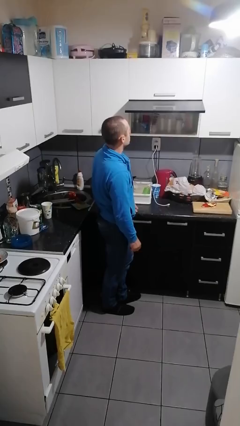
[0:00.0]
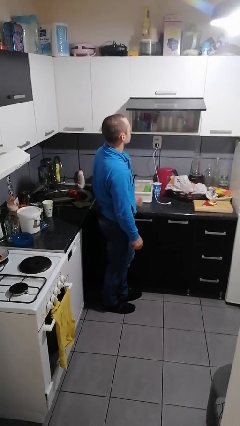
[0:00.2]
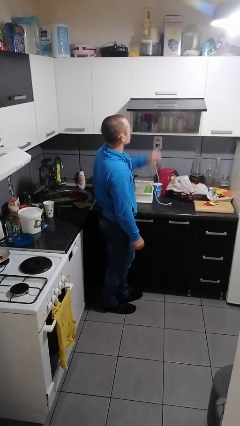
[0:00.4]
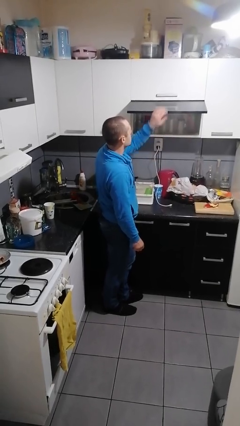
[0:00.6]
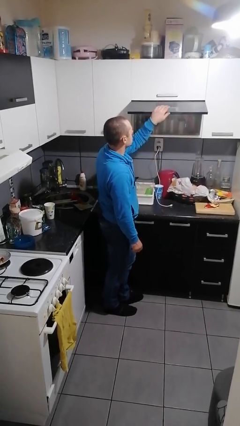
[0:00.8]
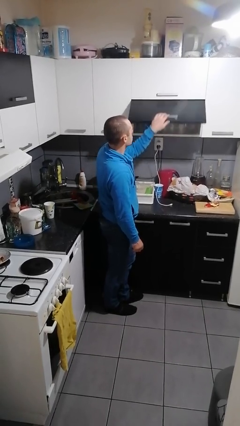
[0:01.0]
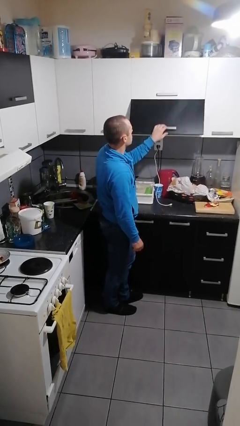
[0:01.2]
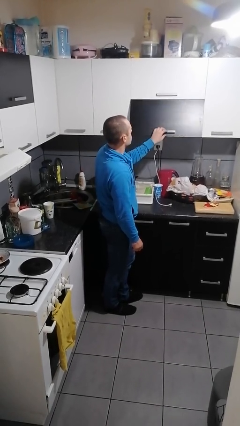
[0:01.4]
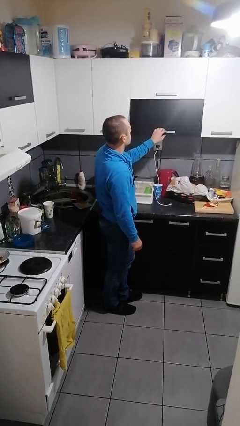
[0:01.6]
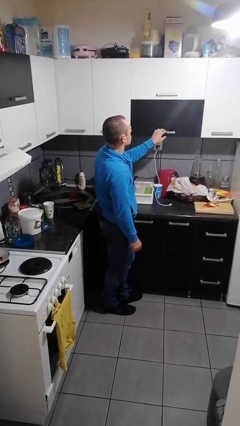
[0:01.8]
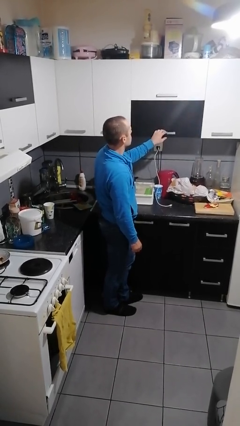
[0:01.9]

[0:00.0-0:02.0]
person closes cabinet

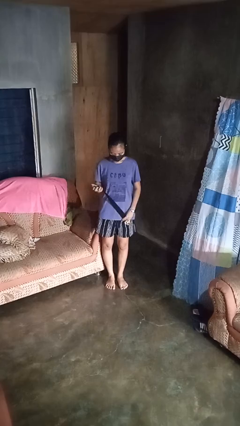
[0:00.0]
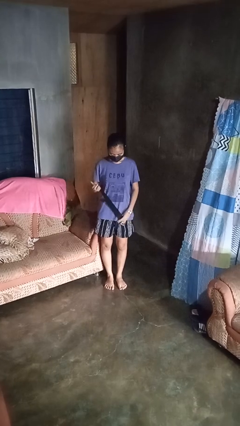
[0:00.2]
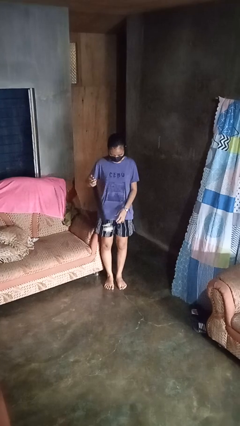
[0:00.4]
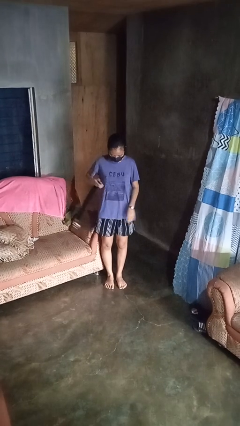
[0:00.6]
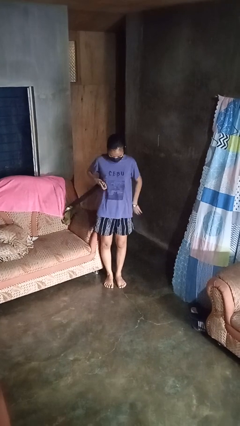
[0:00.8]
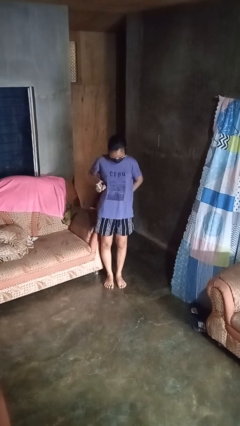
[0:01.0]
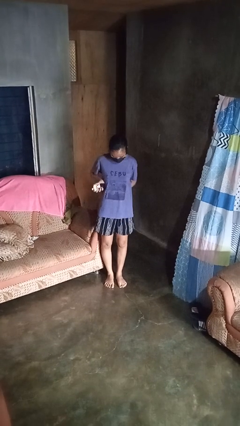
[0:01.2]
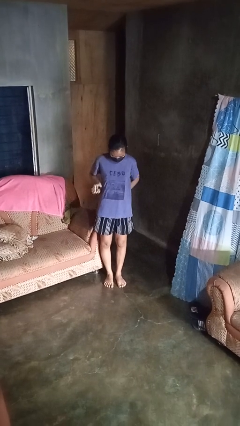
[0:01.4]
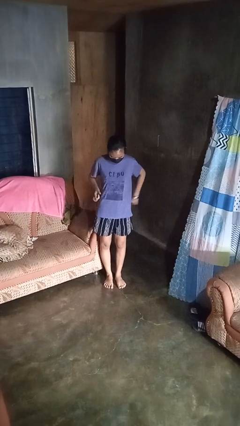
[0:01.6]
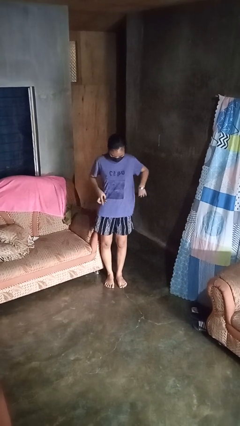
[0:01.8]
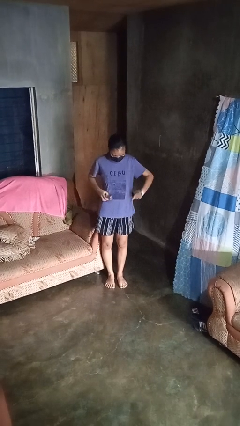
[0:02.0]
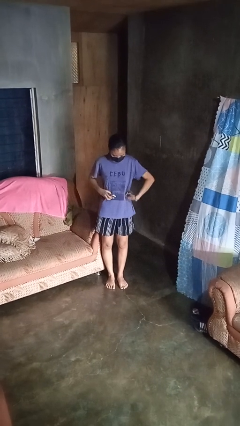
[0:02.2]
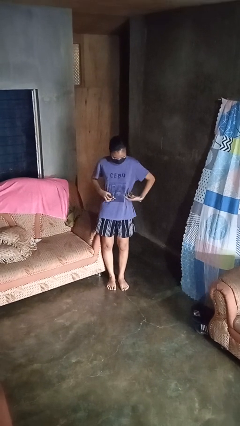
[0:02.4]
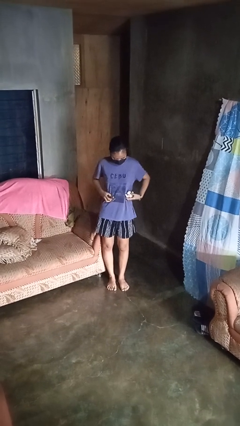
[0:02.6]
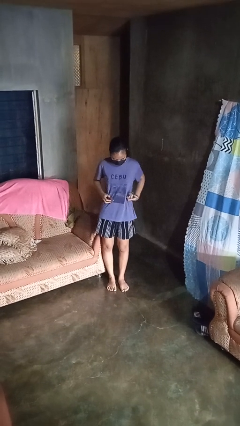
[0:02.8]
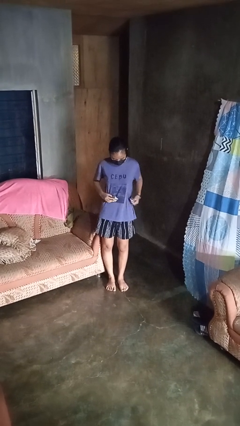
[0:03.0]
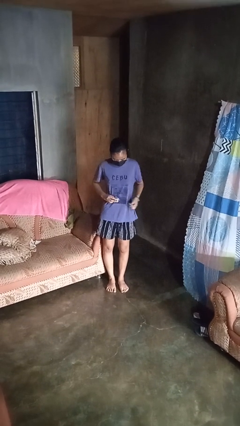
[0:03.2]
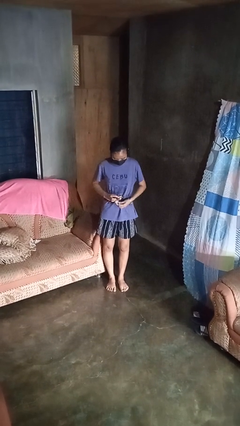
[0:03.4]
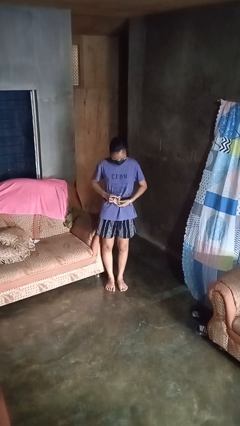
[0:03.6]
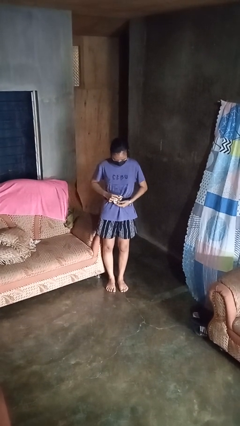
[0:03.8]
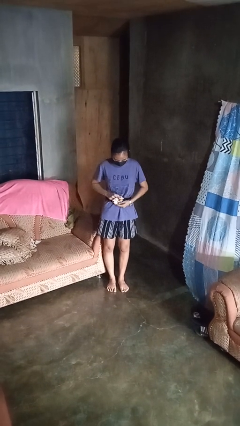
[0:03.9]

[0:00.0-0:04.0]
person puts on belt

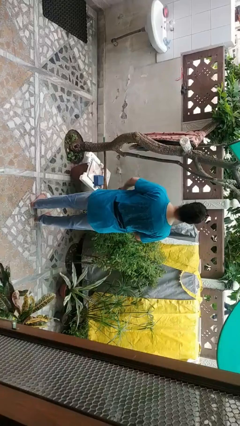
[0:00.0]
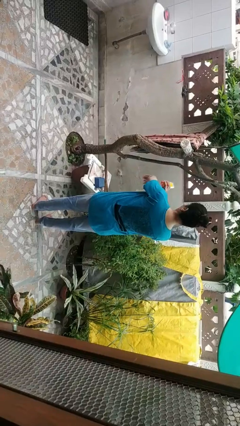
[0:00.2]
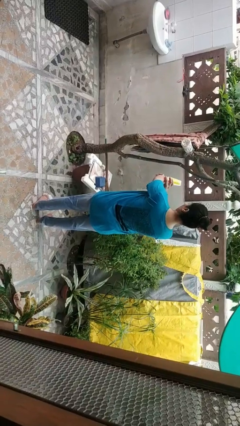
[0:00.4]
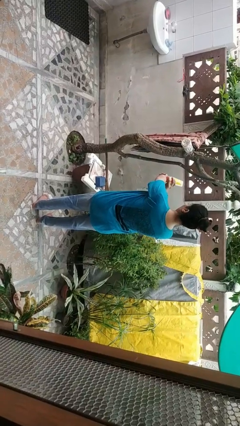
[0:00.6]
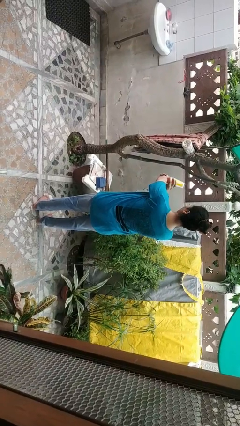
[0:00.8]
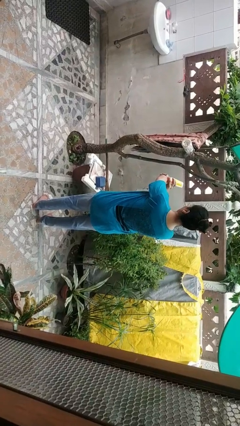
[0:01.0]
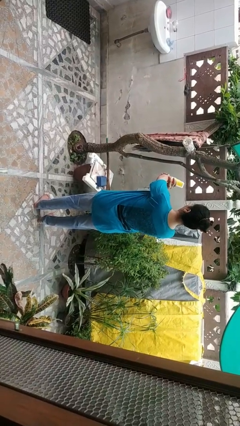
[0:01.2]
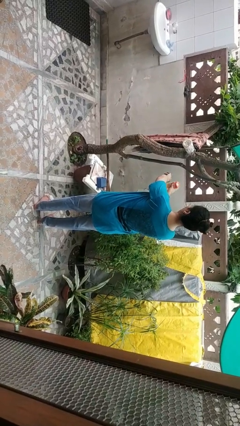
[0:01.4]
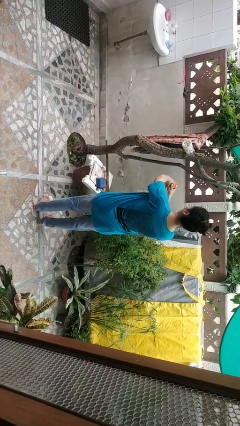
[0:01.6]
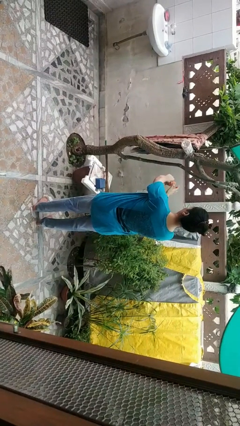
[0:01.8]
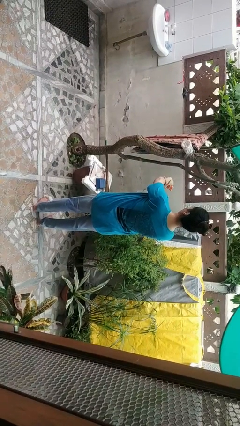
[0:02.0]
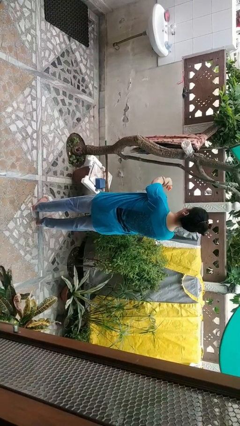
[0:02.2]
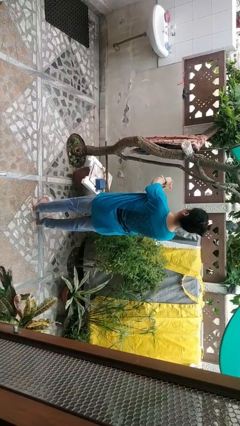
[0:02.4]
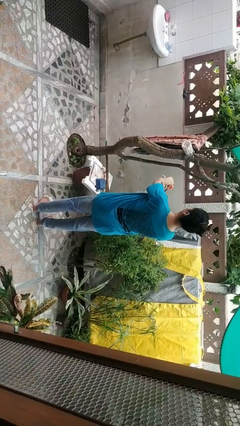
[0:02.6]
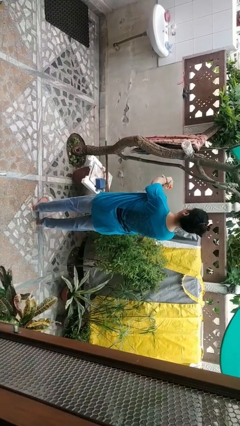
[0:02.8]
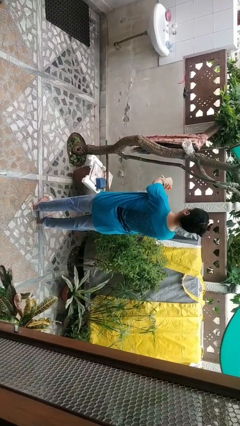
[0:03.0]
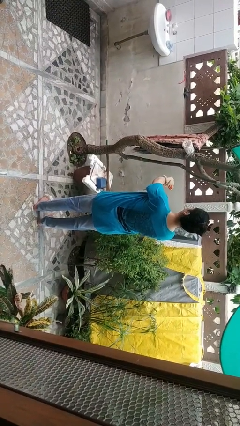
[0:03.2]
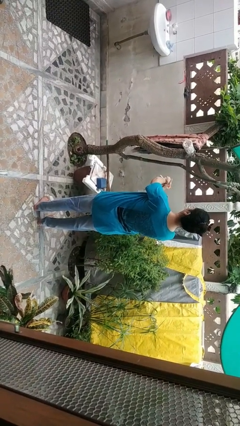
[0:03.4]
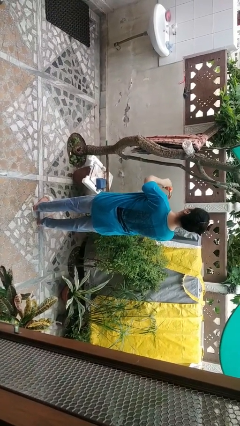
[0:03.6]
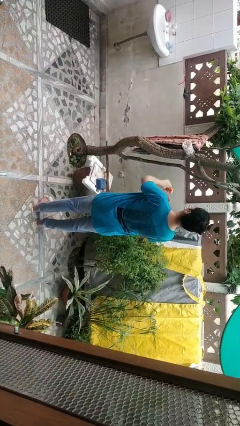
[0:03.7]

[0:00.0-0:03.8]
person applies sunscreen

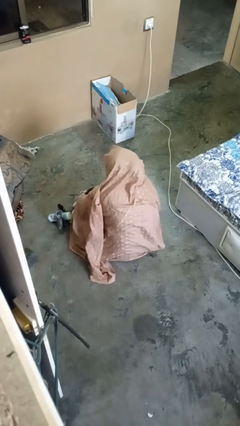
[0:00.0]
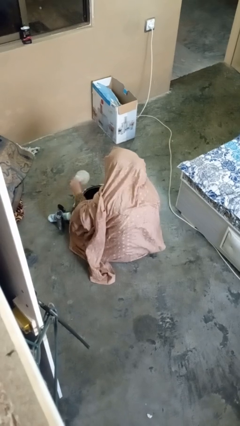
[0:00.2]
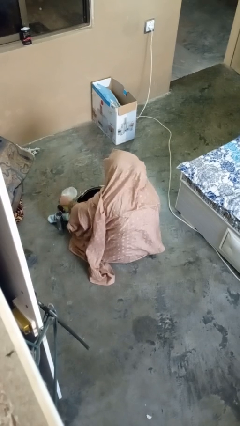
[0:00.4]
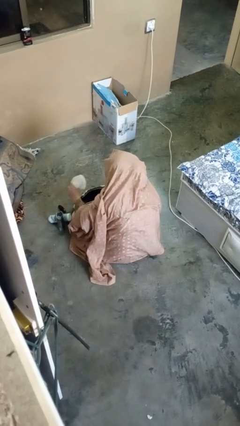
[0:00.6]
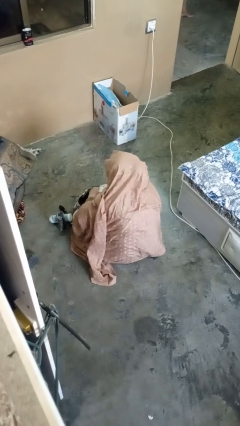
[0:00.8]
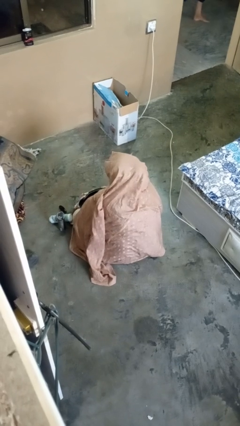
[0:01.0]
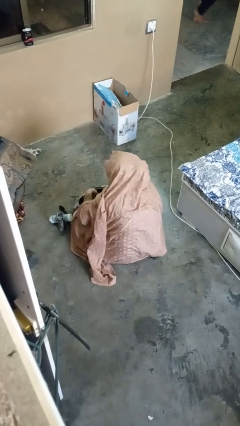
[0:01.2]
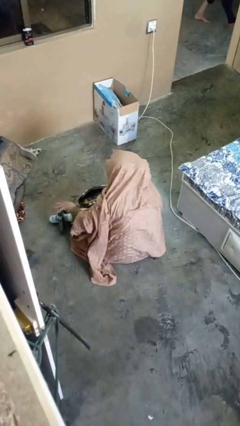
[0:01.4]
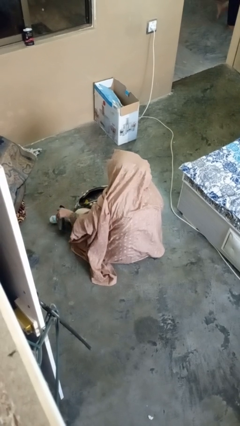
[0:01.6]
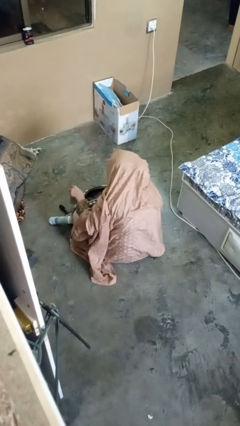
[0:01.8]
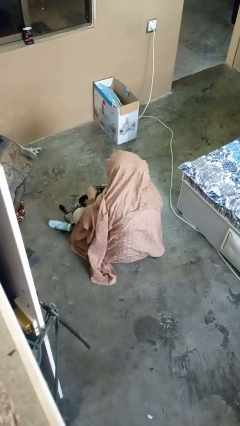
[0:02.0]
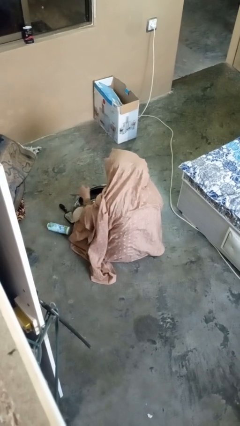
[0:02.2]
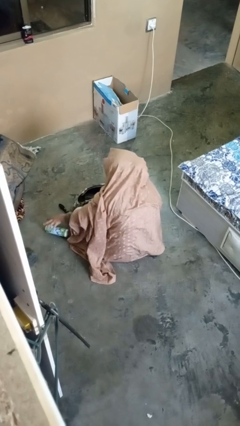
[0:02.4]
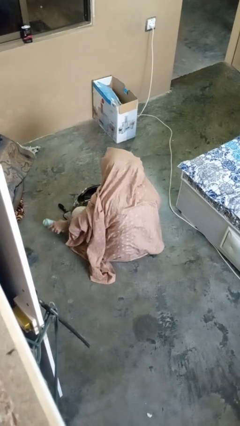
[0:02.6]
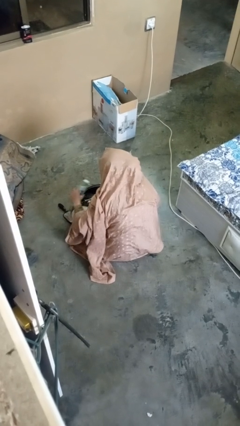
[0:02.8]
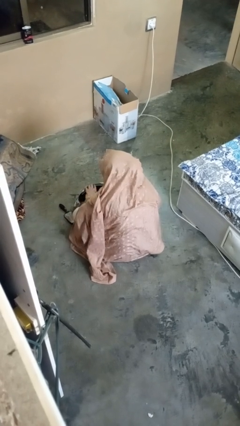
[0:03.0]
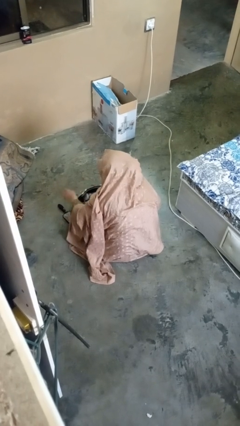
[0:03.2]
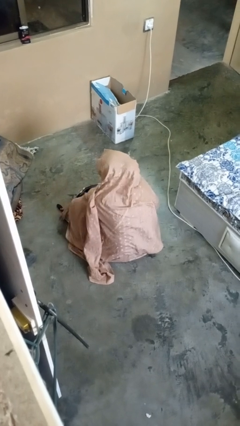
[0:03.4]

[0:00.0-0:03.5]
person puts object into purse

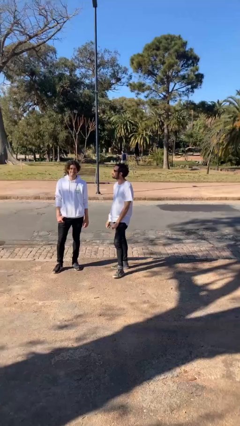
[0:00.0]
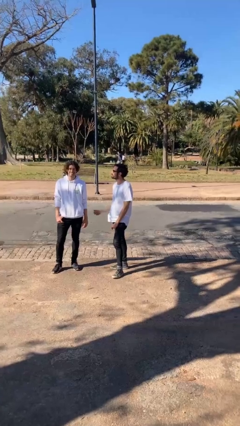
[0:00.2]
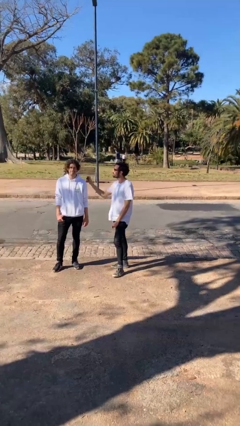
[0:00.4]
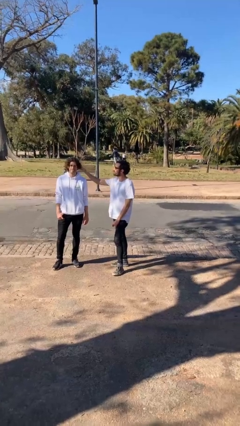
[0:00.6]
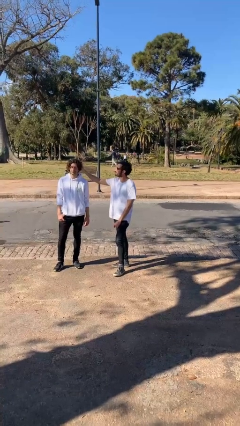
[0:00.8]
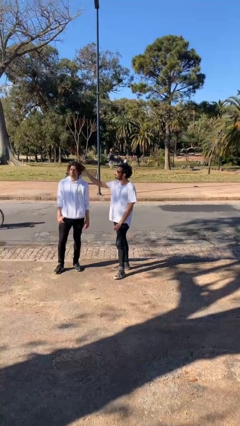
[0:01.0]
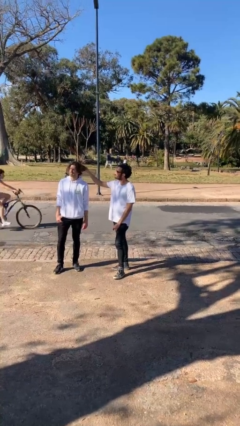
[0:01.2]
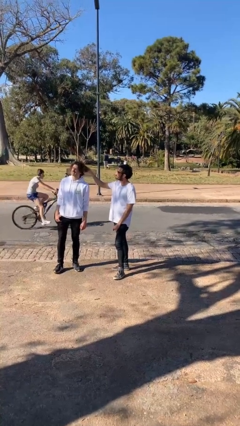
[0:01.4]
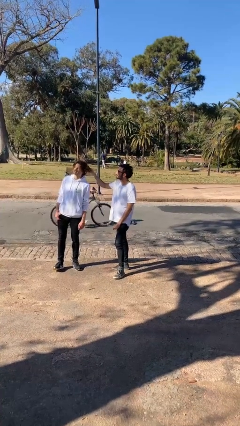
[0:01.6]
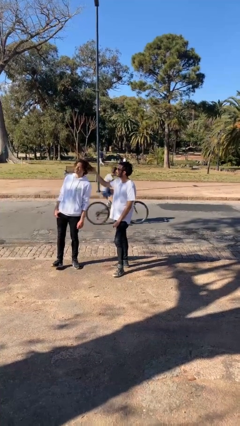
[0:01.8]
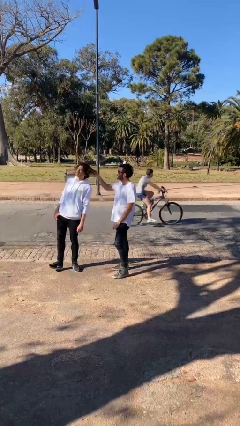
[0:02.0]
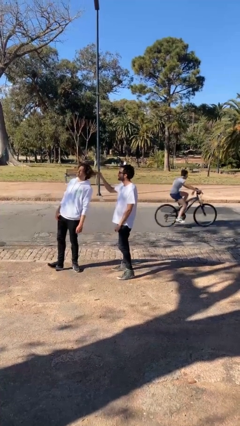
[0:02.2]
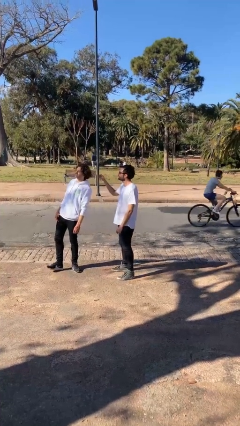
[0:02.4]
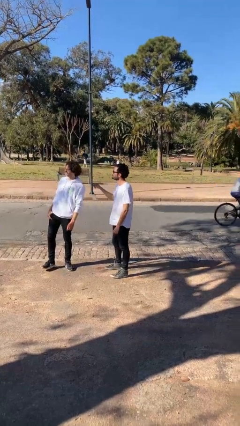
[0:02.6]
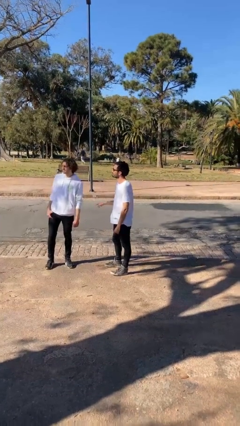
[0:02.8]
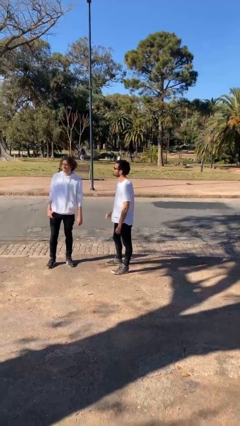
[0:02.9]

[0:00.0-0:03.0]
person grabs person by hair

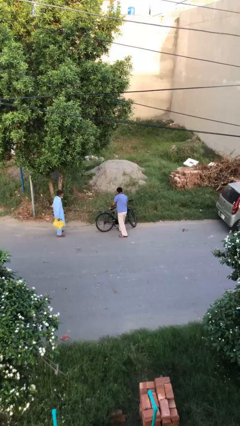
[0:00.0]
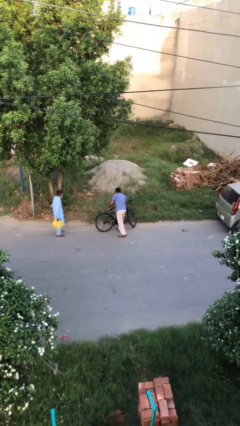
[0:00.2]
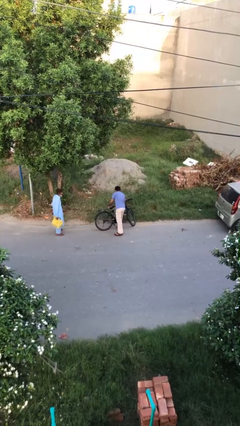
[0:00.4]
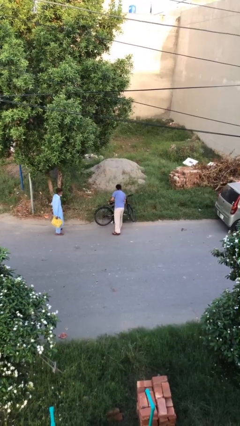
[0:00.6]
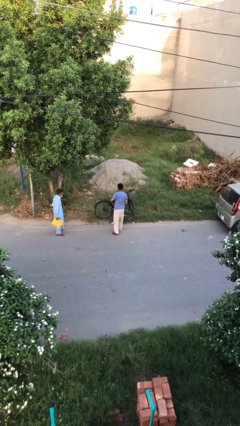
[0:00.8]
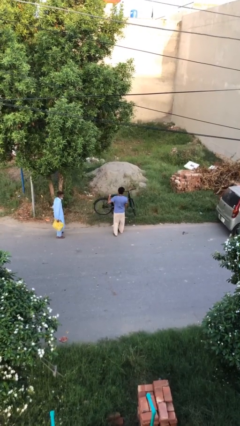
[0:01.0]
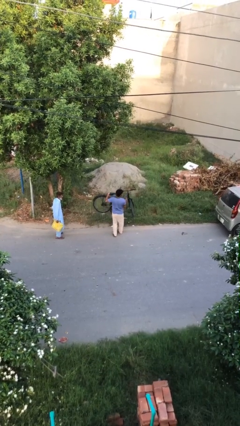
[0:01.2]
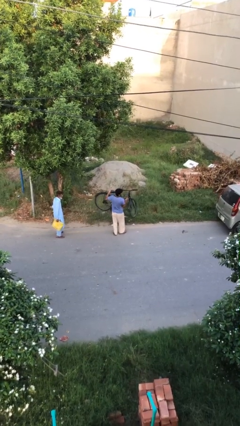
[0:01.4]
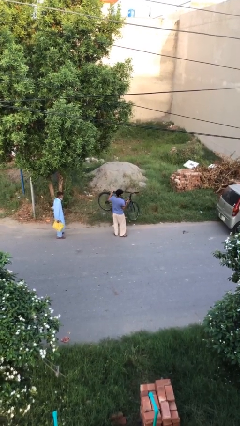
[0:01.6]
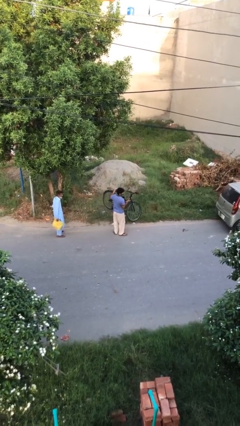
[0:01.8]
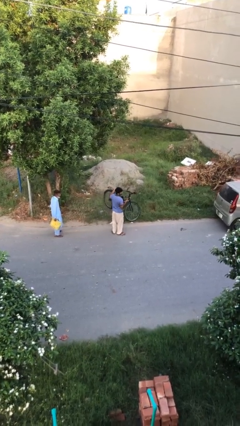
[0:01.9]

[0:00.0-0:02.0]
person picks up object from floor
